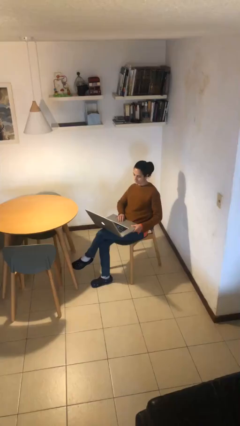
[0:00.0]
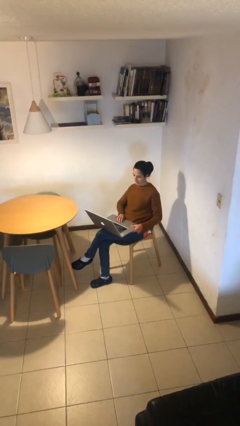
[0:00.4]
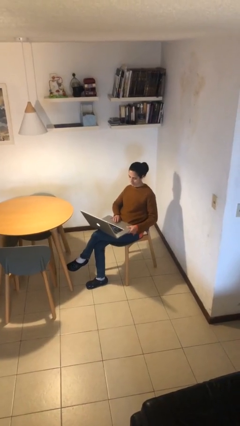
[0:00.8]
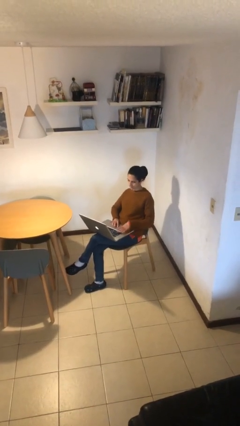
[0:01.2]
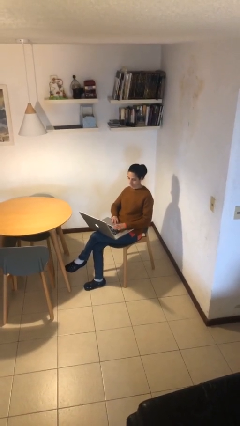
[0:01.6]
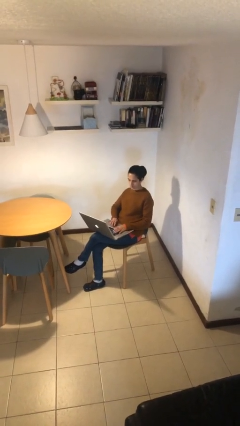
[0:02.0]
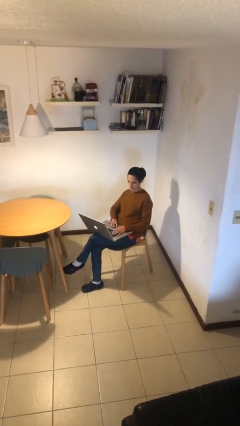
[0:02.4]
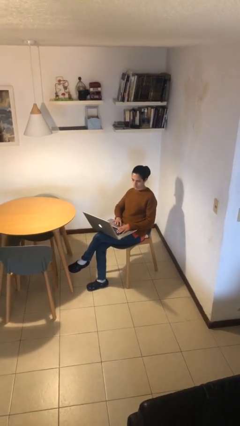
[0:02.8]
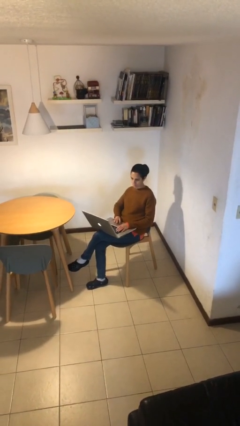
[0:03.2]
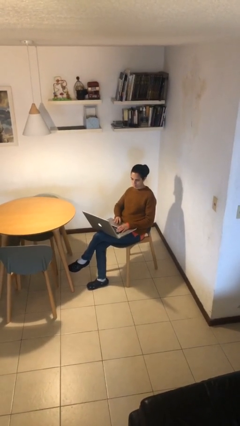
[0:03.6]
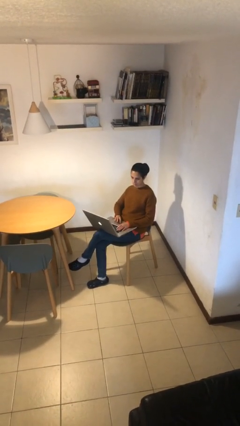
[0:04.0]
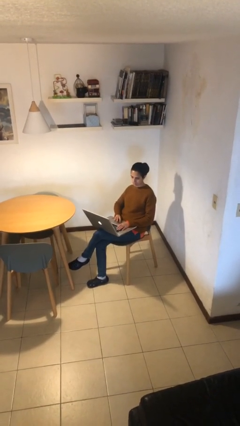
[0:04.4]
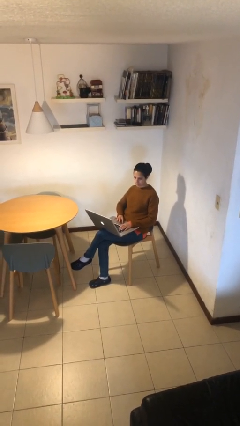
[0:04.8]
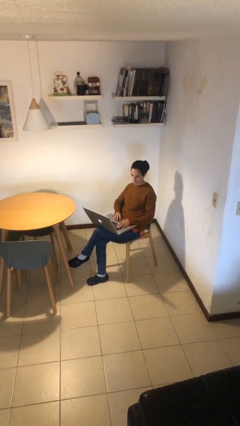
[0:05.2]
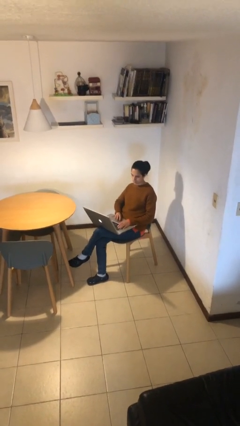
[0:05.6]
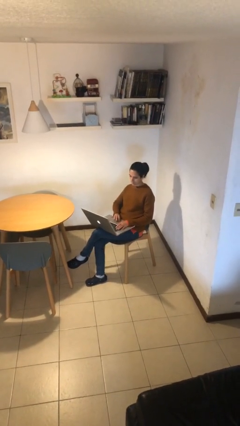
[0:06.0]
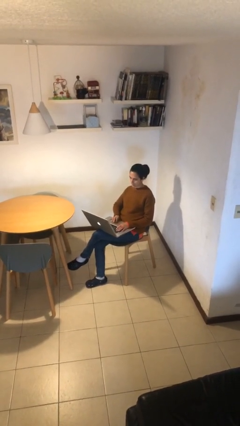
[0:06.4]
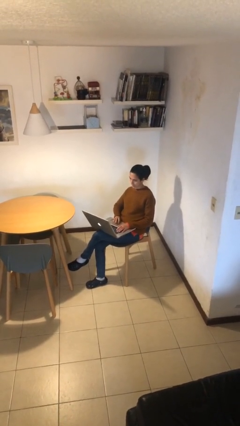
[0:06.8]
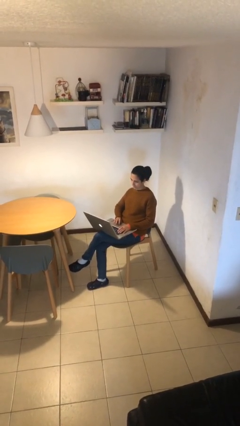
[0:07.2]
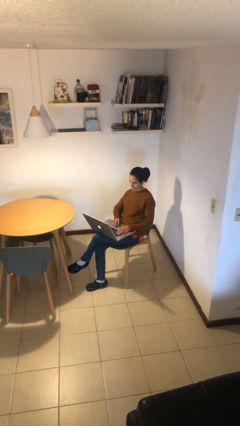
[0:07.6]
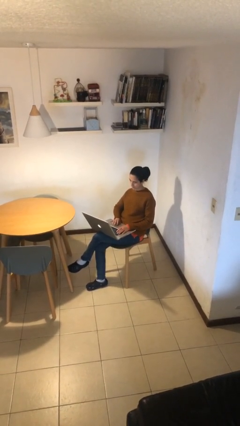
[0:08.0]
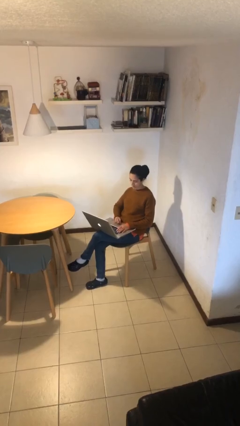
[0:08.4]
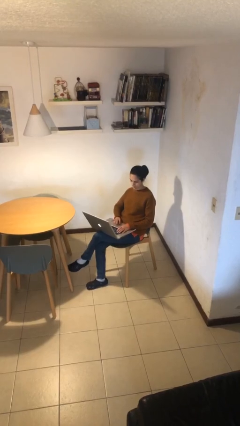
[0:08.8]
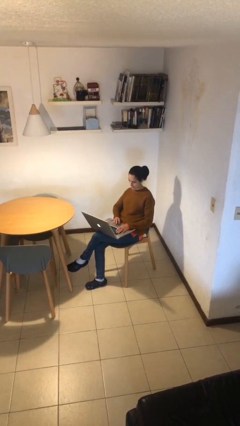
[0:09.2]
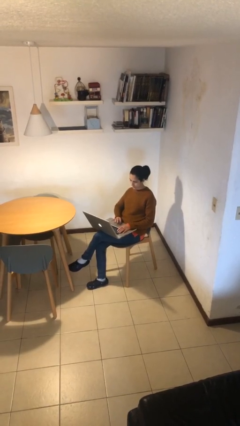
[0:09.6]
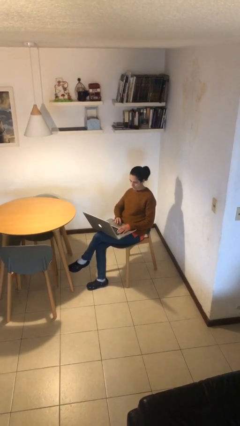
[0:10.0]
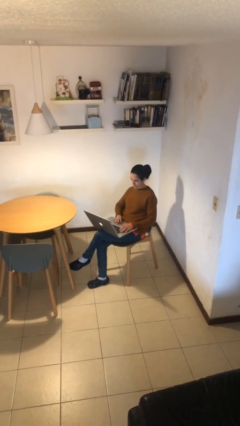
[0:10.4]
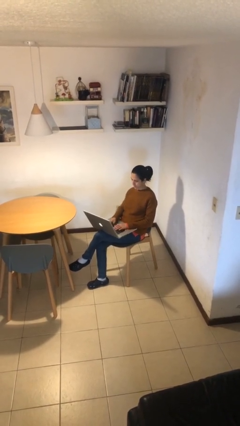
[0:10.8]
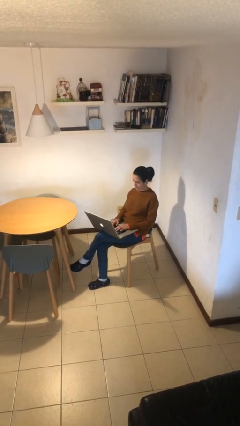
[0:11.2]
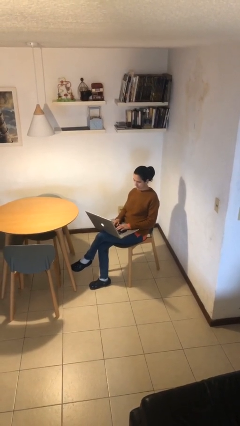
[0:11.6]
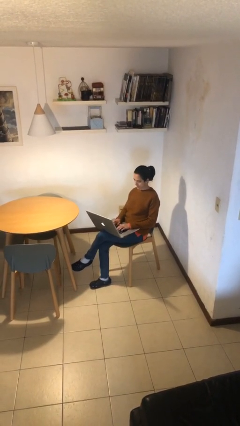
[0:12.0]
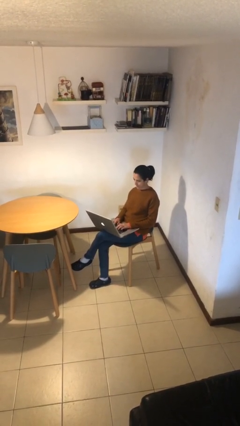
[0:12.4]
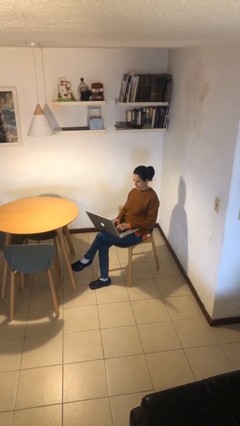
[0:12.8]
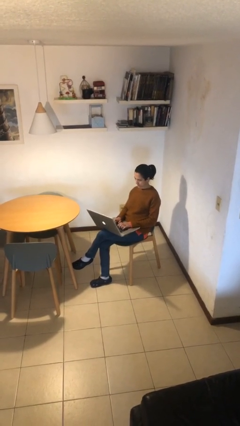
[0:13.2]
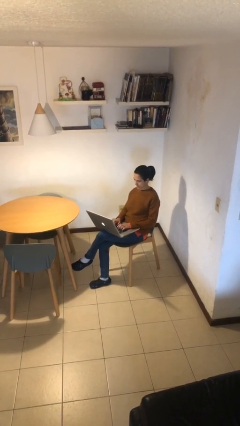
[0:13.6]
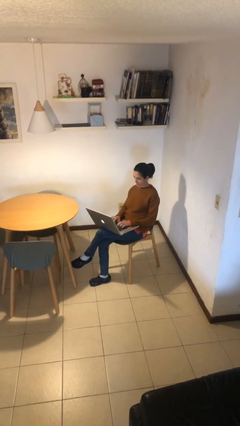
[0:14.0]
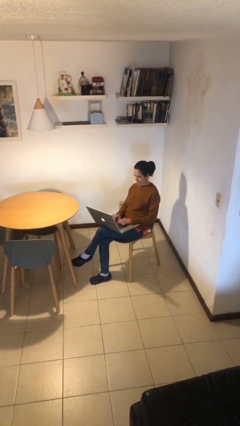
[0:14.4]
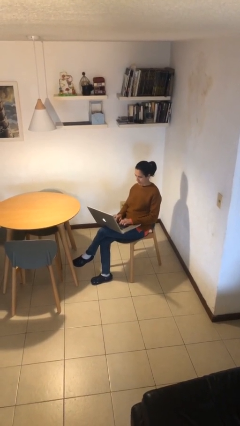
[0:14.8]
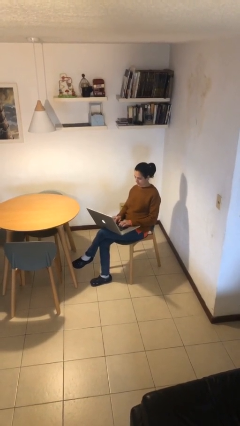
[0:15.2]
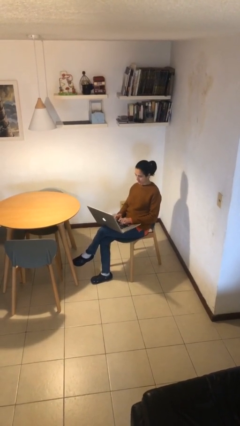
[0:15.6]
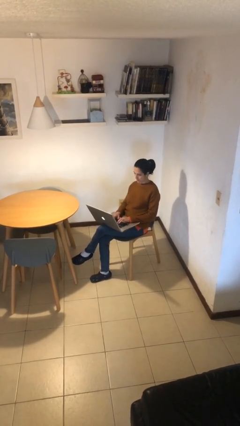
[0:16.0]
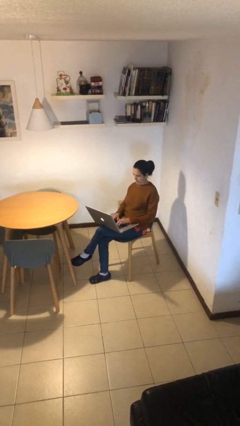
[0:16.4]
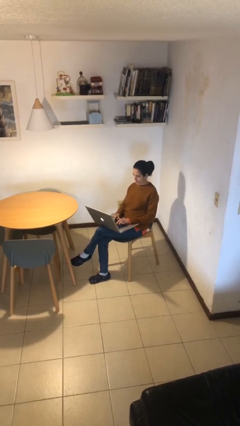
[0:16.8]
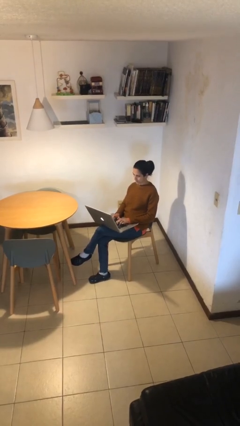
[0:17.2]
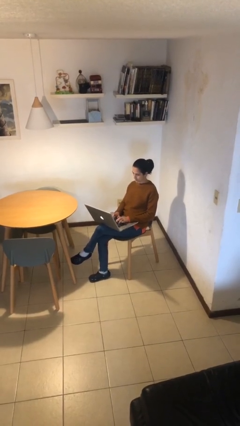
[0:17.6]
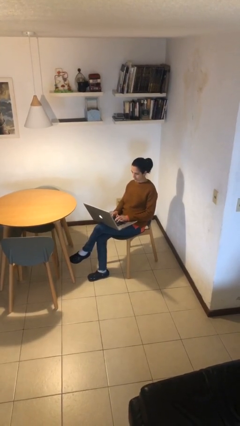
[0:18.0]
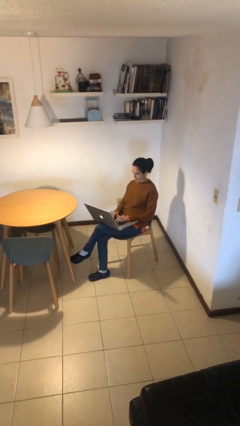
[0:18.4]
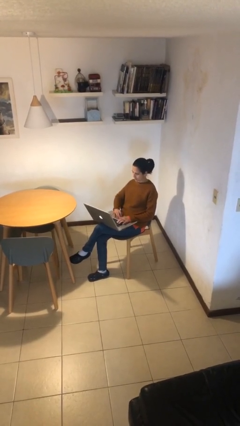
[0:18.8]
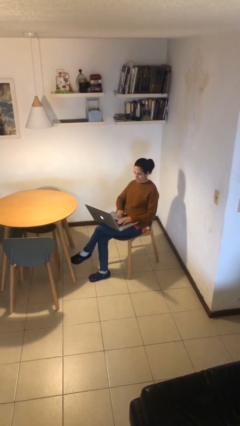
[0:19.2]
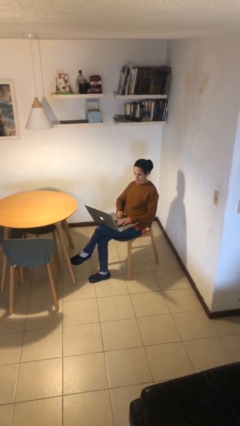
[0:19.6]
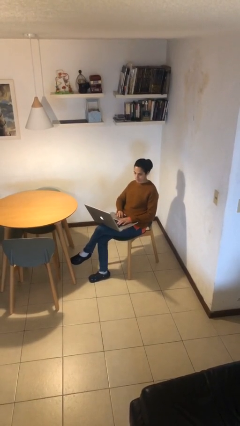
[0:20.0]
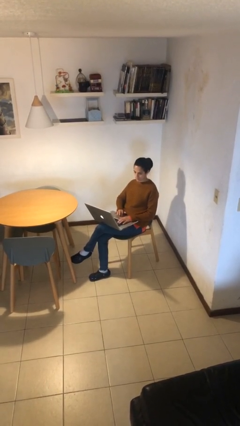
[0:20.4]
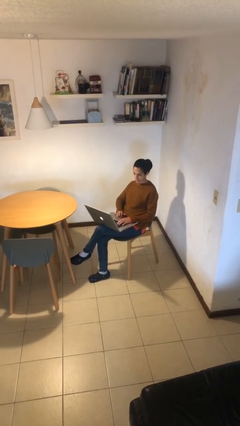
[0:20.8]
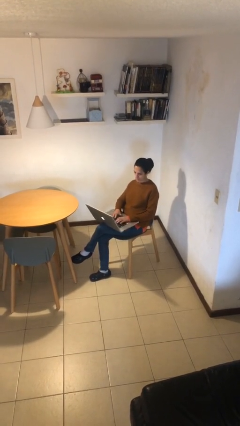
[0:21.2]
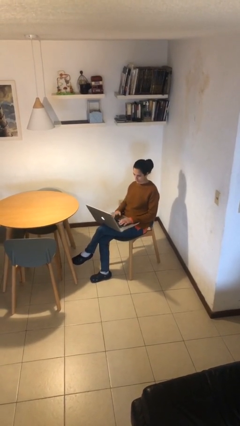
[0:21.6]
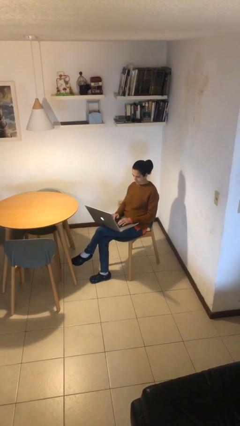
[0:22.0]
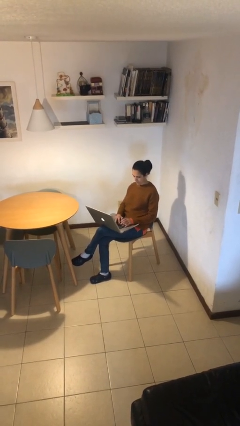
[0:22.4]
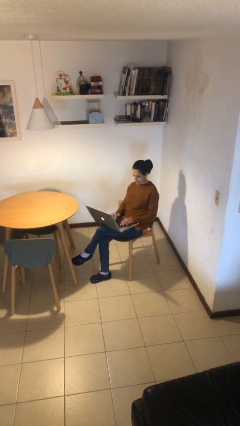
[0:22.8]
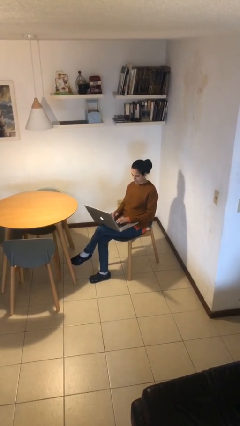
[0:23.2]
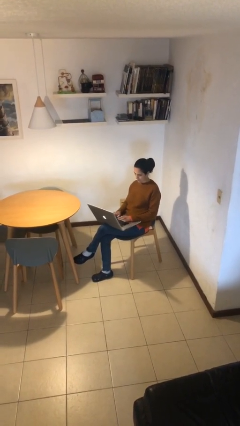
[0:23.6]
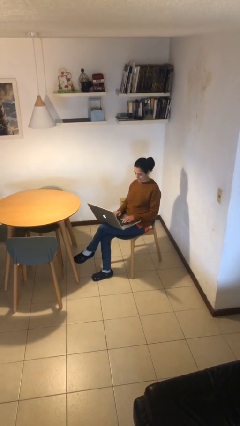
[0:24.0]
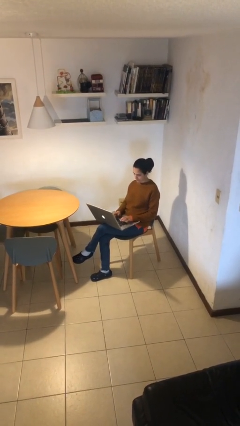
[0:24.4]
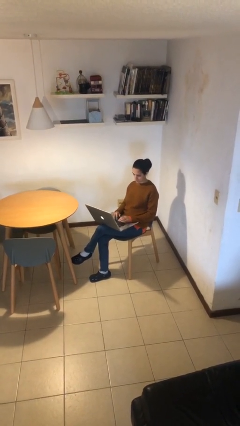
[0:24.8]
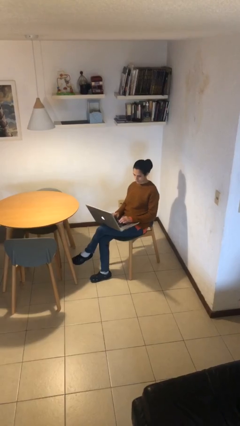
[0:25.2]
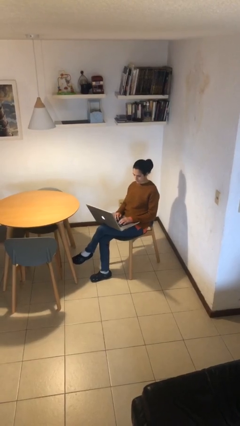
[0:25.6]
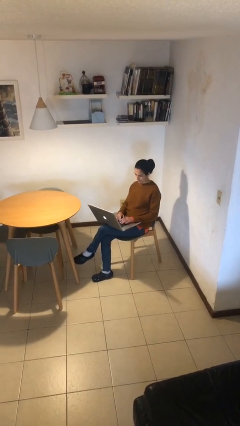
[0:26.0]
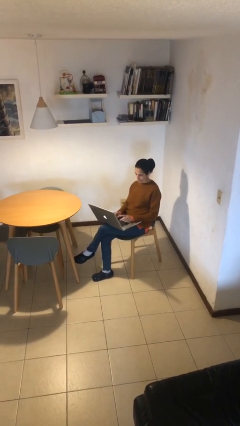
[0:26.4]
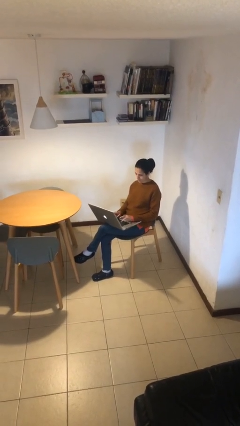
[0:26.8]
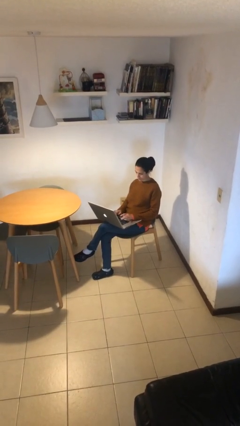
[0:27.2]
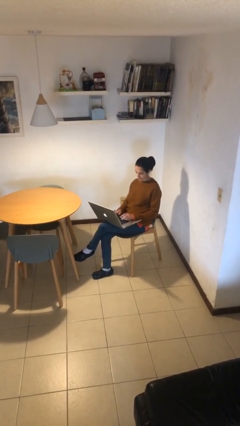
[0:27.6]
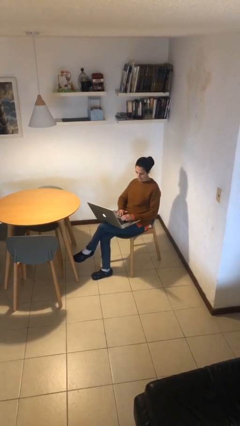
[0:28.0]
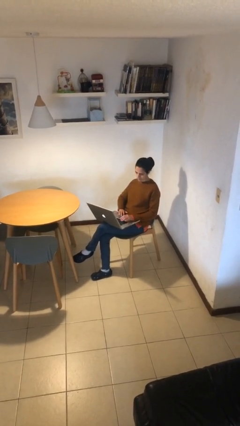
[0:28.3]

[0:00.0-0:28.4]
person interacts with laptop

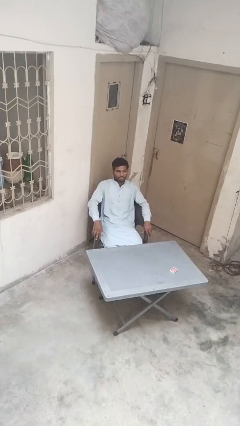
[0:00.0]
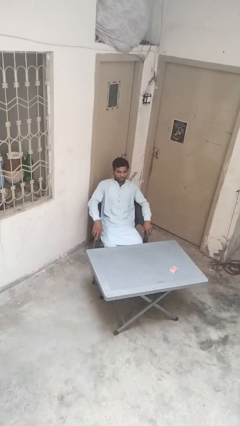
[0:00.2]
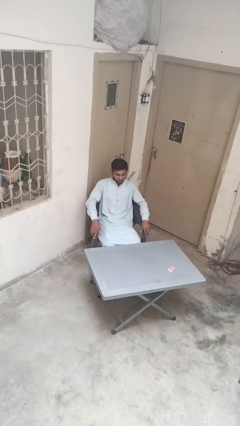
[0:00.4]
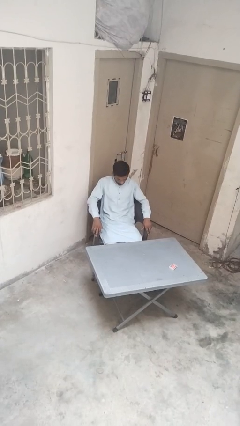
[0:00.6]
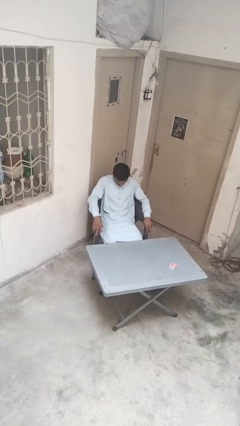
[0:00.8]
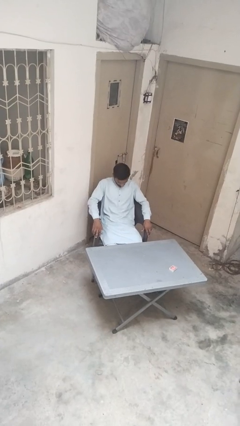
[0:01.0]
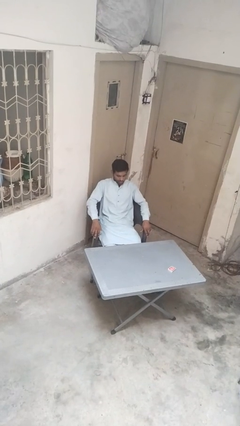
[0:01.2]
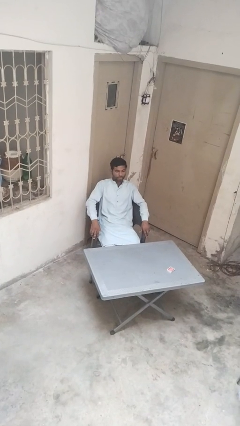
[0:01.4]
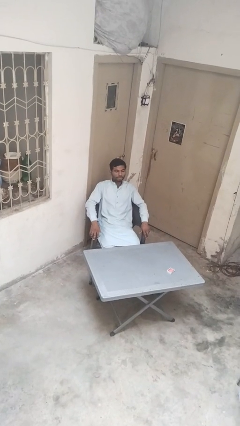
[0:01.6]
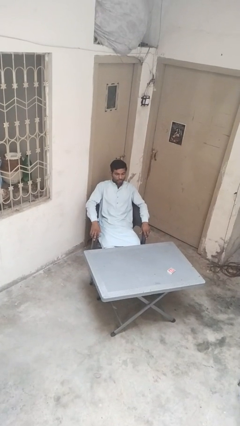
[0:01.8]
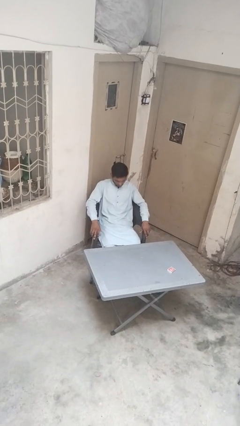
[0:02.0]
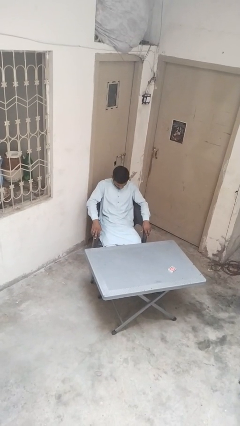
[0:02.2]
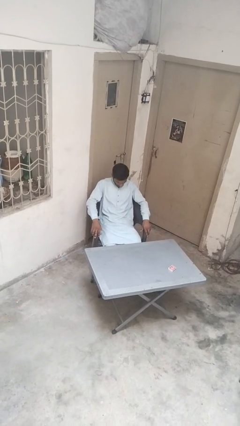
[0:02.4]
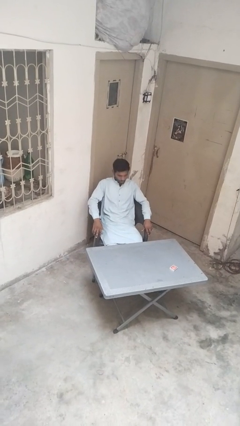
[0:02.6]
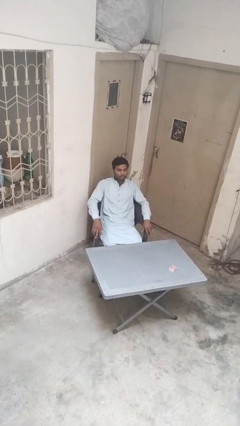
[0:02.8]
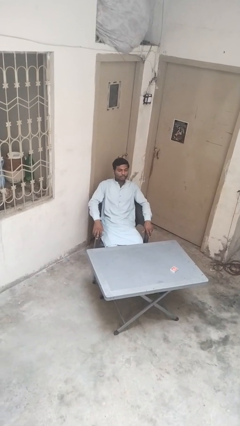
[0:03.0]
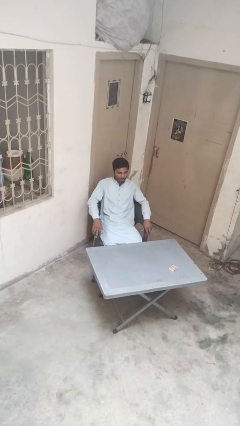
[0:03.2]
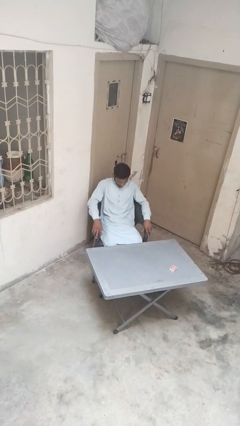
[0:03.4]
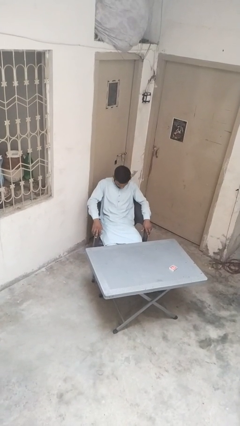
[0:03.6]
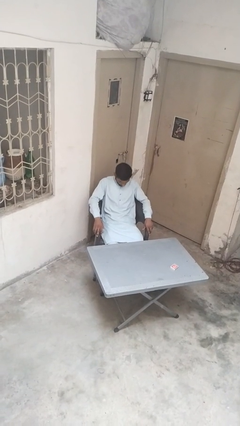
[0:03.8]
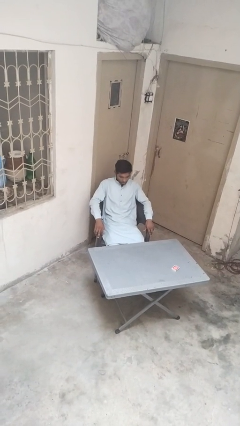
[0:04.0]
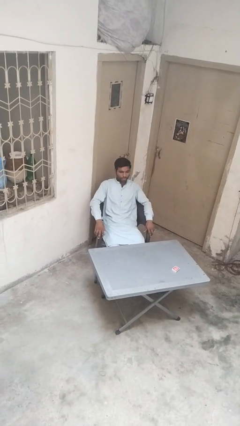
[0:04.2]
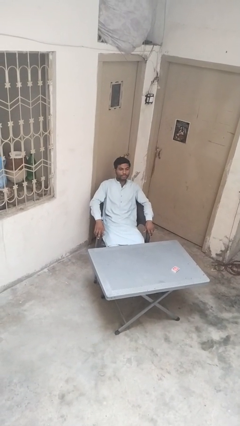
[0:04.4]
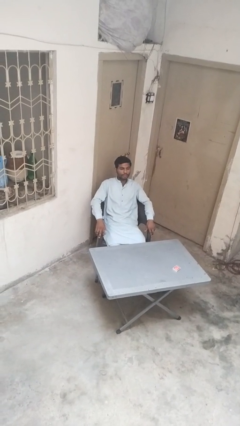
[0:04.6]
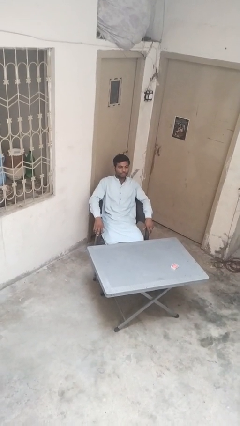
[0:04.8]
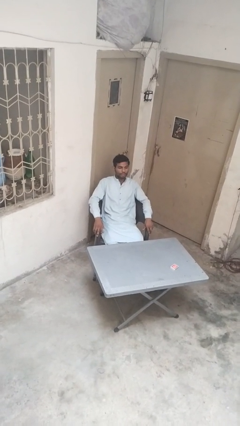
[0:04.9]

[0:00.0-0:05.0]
person nods head
